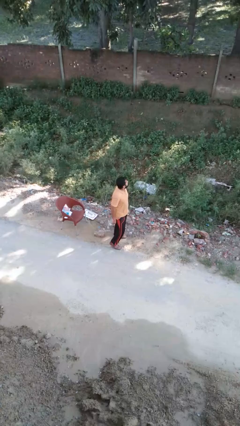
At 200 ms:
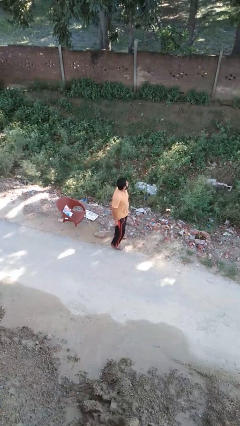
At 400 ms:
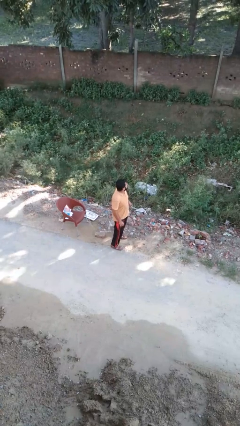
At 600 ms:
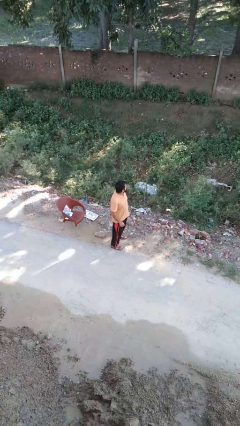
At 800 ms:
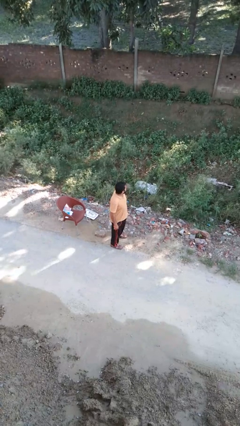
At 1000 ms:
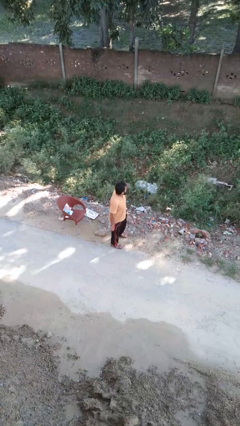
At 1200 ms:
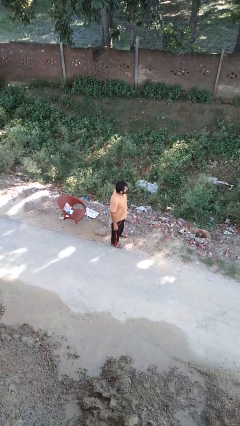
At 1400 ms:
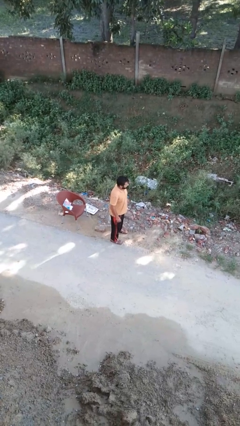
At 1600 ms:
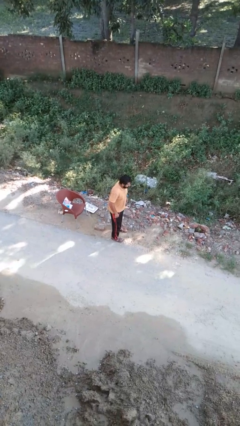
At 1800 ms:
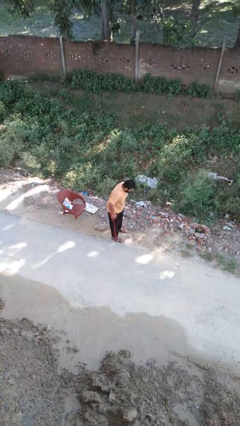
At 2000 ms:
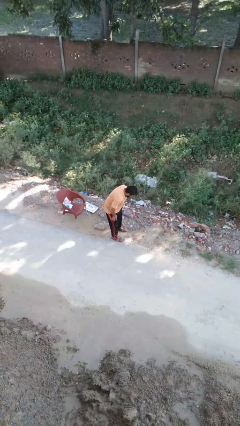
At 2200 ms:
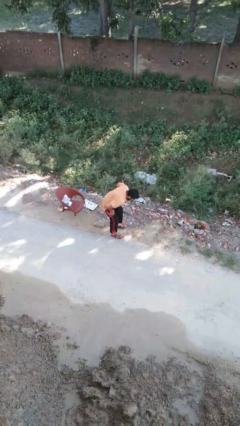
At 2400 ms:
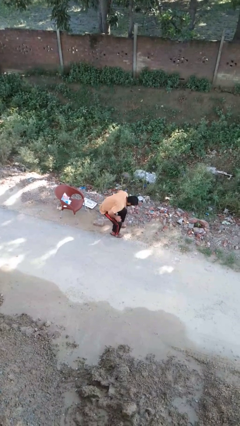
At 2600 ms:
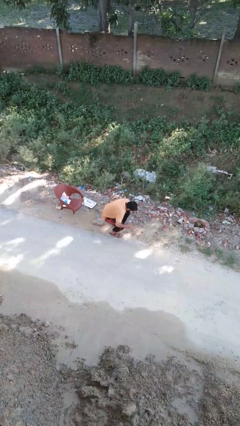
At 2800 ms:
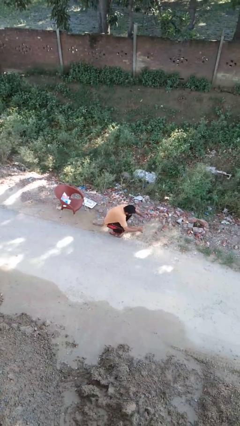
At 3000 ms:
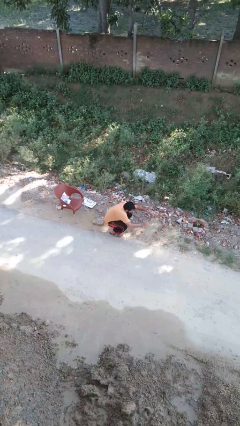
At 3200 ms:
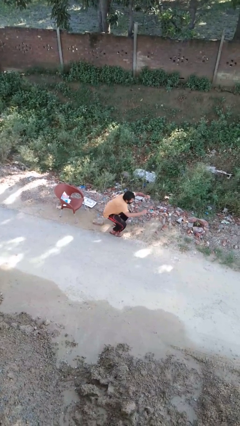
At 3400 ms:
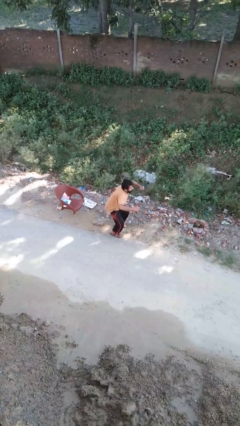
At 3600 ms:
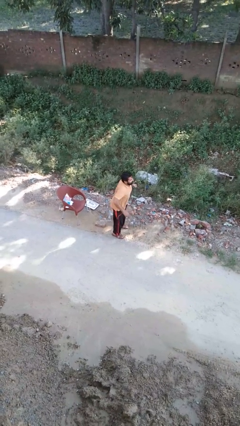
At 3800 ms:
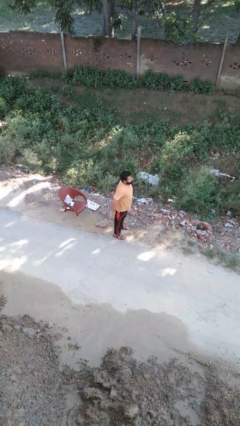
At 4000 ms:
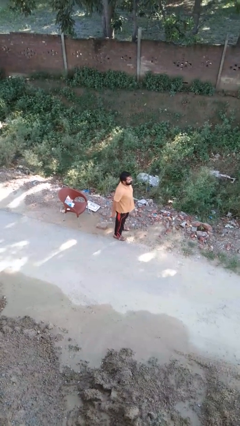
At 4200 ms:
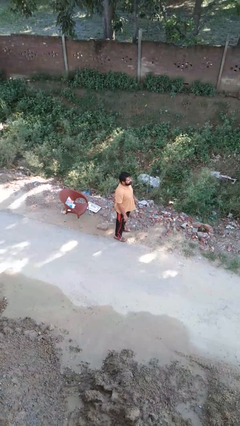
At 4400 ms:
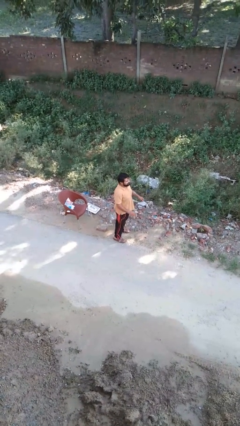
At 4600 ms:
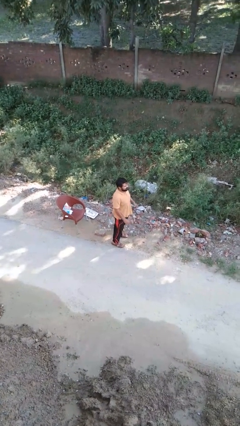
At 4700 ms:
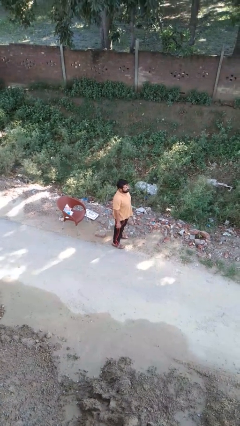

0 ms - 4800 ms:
person exercises with situp

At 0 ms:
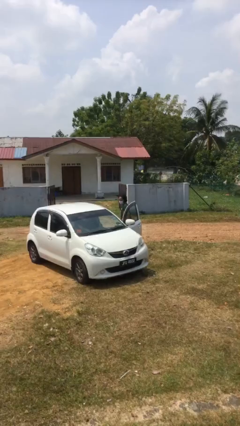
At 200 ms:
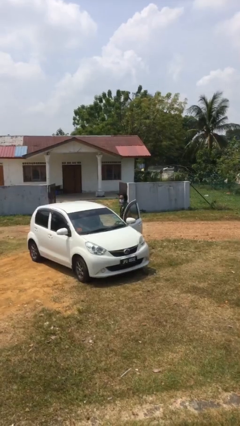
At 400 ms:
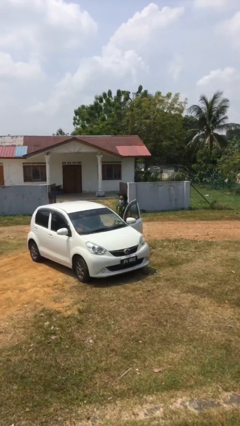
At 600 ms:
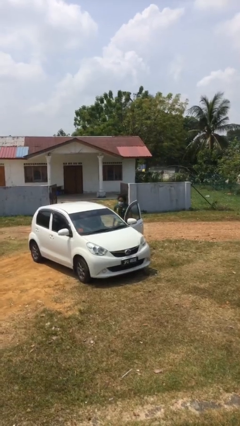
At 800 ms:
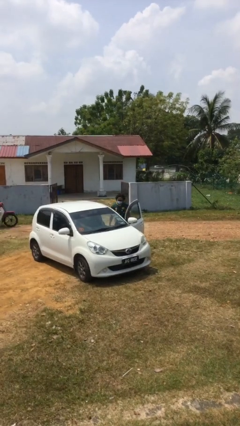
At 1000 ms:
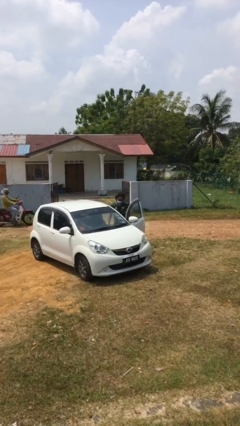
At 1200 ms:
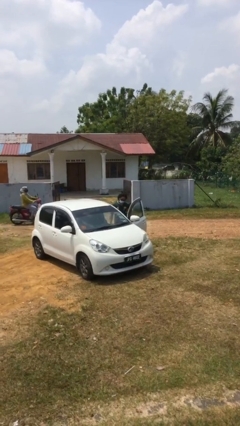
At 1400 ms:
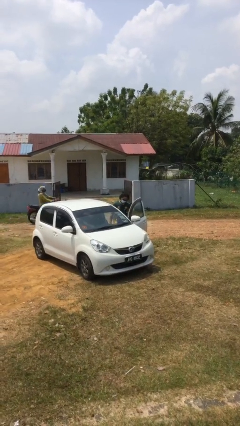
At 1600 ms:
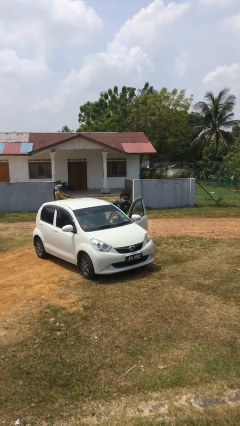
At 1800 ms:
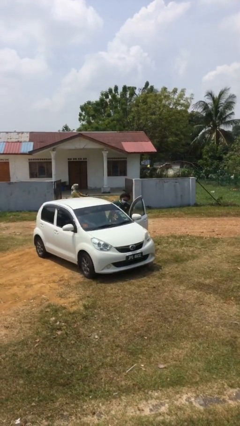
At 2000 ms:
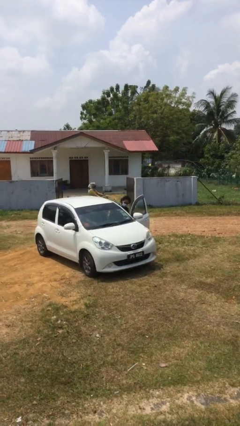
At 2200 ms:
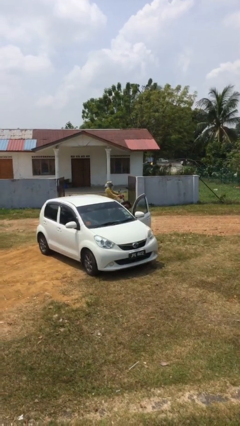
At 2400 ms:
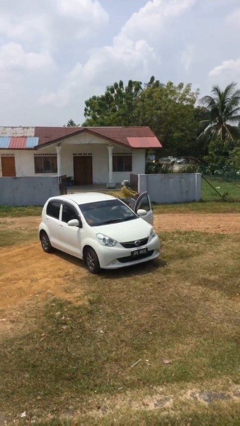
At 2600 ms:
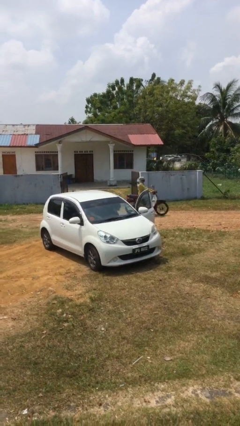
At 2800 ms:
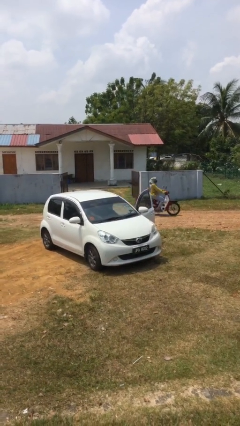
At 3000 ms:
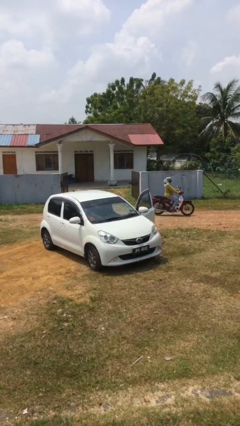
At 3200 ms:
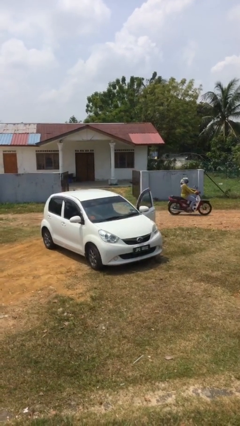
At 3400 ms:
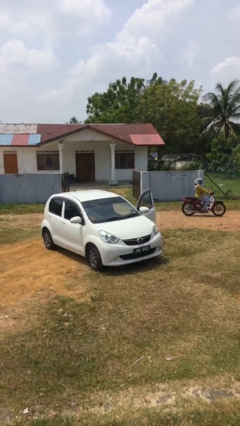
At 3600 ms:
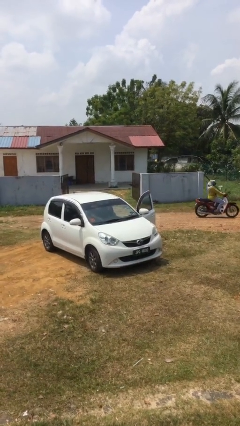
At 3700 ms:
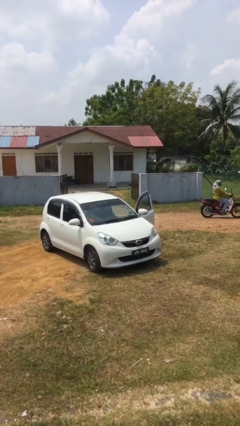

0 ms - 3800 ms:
person enters car

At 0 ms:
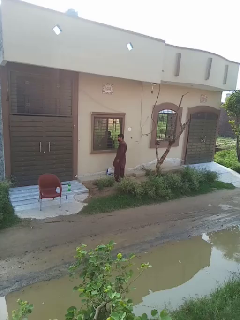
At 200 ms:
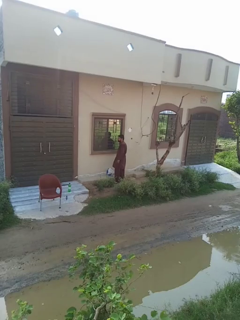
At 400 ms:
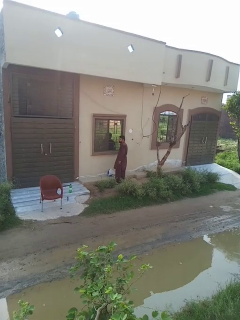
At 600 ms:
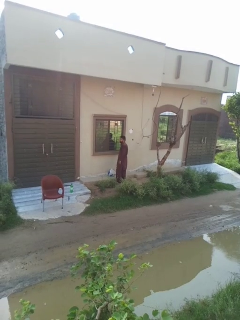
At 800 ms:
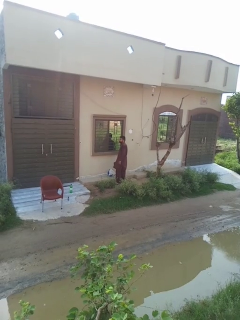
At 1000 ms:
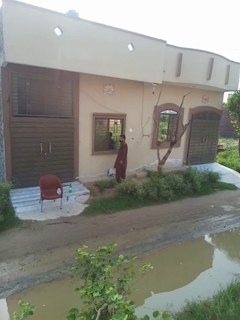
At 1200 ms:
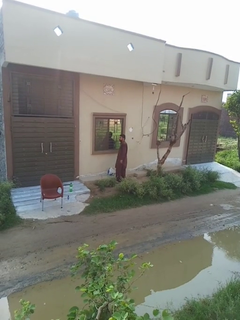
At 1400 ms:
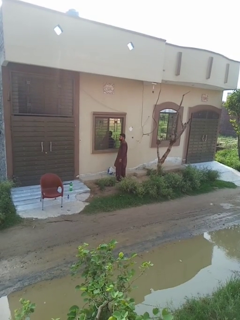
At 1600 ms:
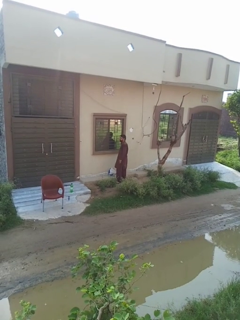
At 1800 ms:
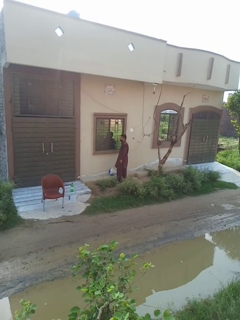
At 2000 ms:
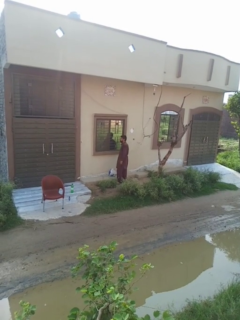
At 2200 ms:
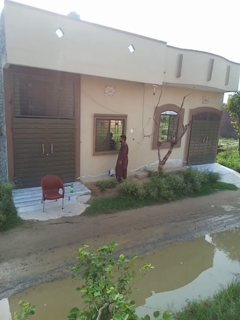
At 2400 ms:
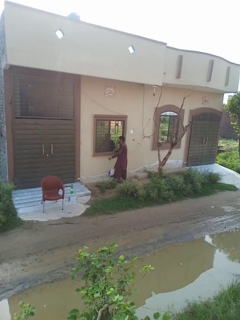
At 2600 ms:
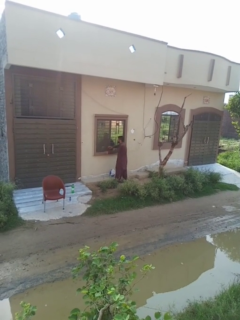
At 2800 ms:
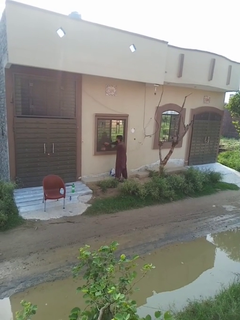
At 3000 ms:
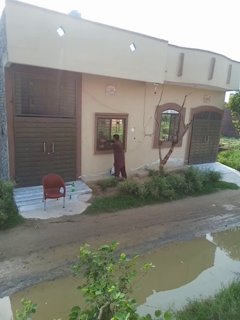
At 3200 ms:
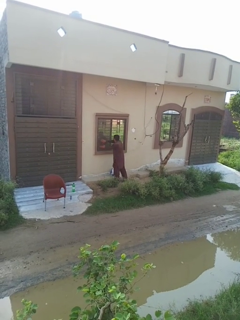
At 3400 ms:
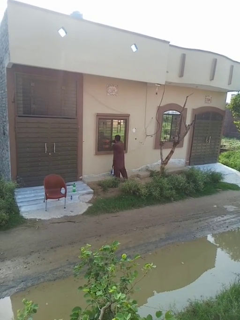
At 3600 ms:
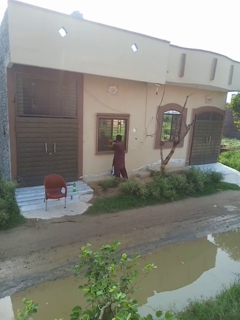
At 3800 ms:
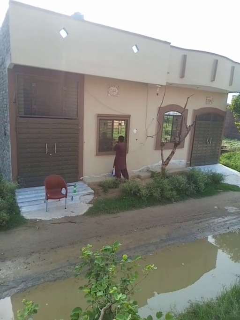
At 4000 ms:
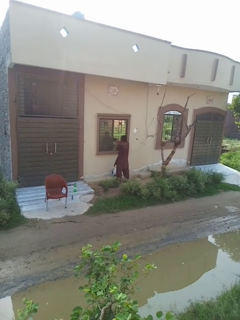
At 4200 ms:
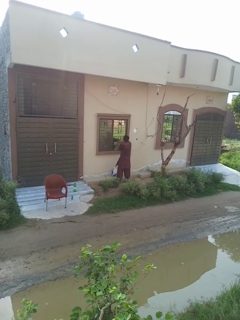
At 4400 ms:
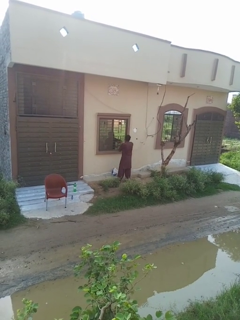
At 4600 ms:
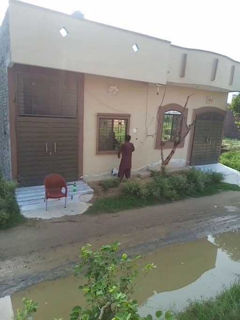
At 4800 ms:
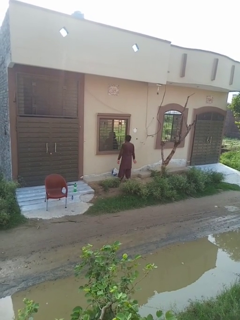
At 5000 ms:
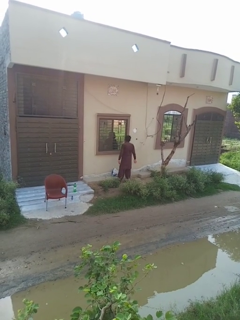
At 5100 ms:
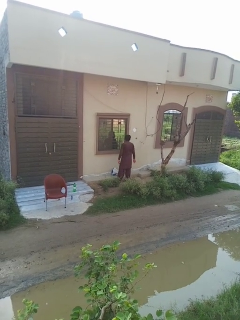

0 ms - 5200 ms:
person opens home window

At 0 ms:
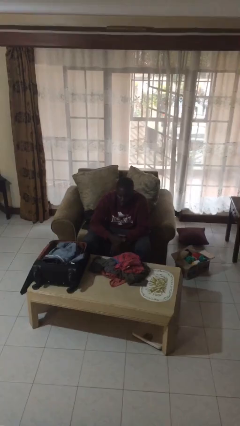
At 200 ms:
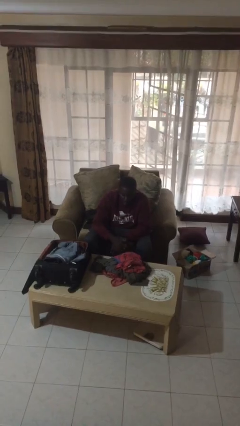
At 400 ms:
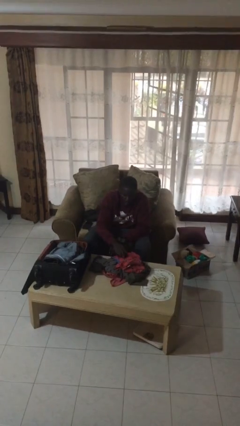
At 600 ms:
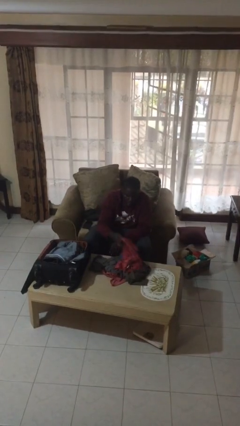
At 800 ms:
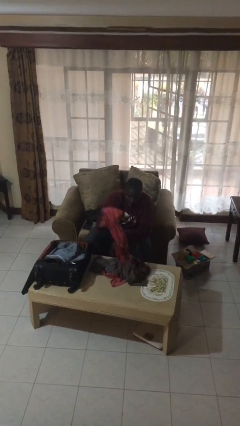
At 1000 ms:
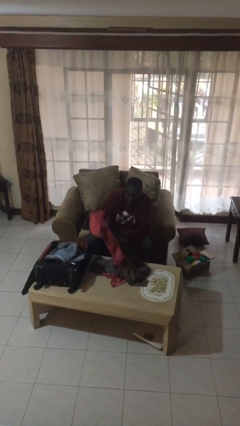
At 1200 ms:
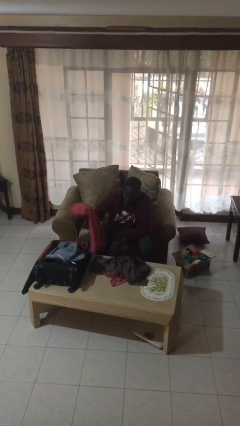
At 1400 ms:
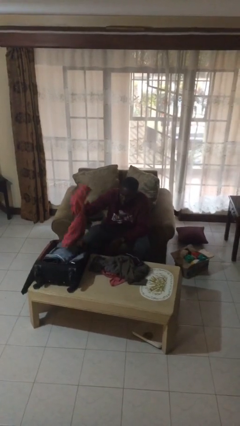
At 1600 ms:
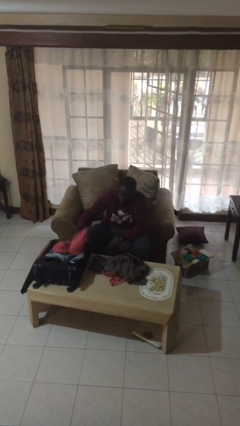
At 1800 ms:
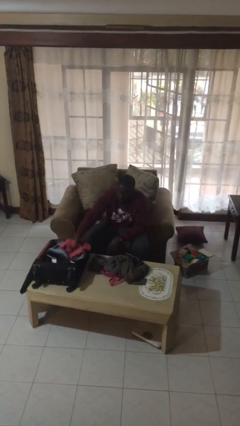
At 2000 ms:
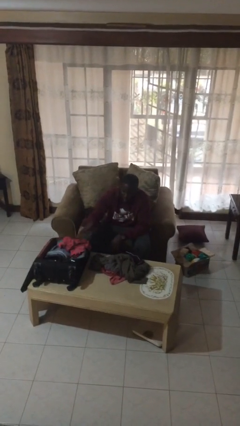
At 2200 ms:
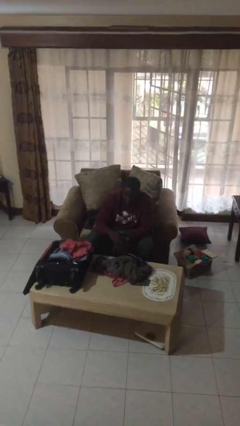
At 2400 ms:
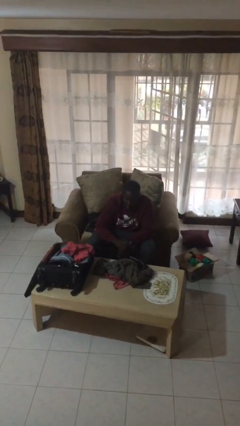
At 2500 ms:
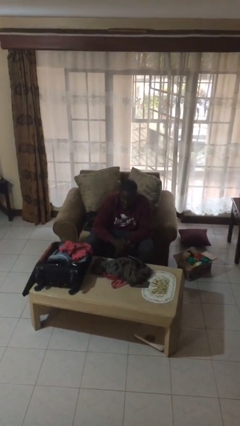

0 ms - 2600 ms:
person loads clothes into suitcase

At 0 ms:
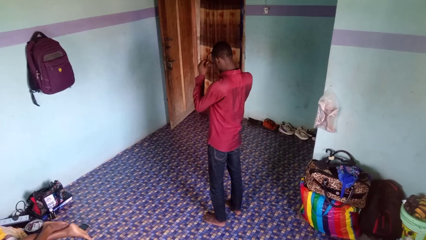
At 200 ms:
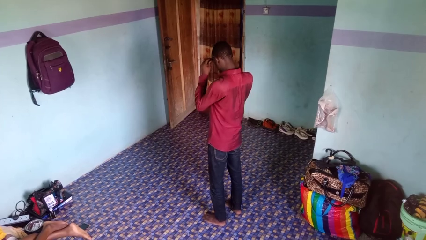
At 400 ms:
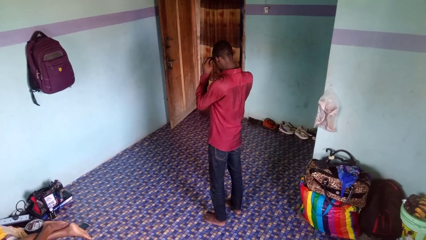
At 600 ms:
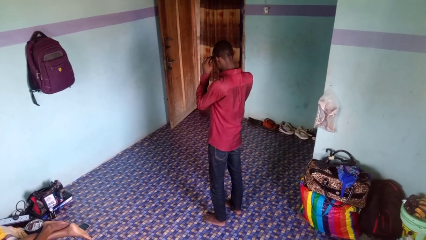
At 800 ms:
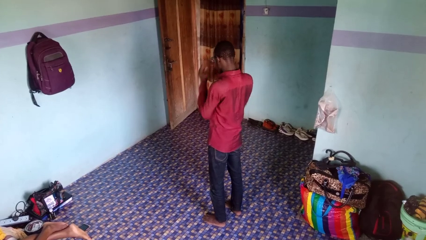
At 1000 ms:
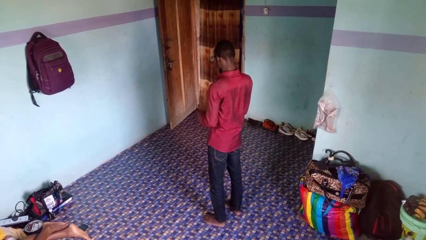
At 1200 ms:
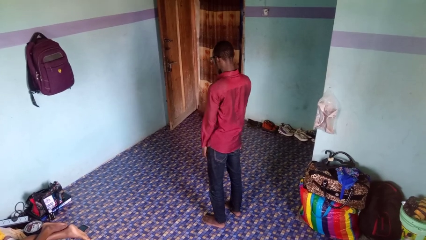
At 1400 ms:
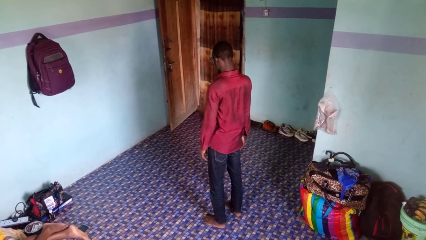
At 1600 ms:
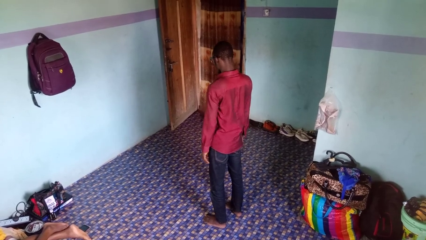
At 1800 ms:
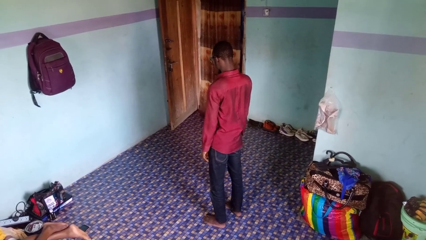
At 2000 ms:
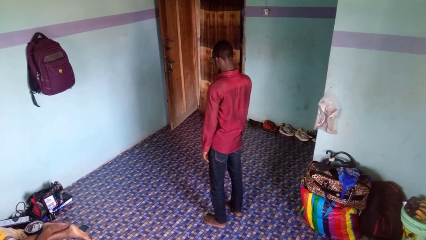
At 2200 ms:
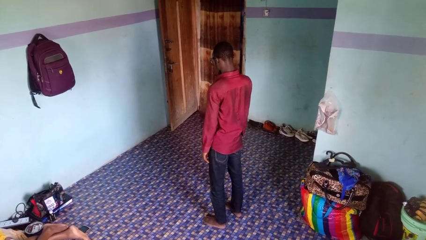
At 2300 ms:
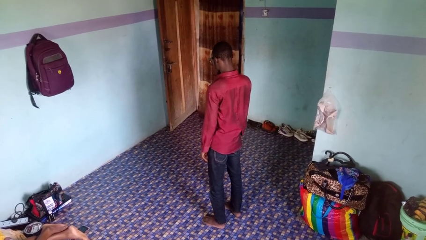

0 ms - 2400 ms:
person puts on glasses

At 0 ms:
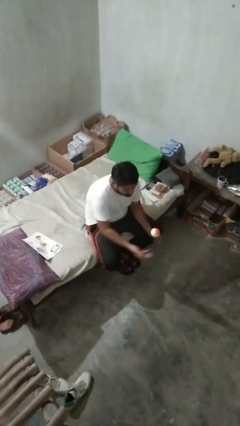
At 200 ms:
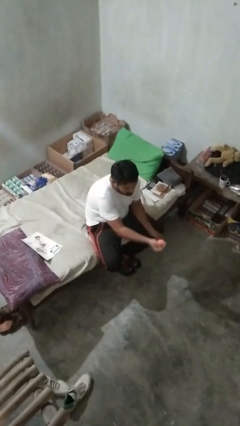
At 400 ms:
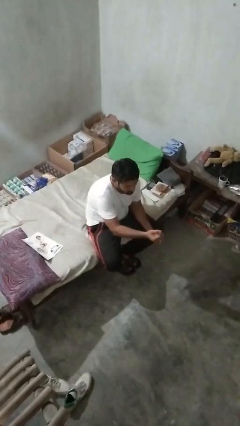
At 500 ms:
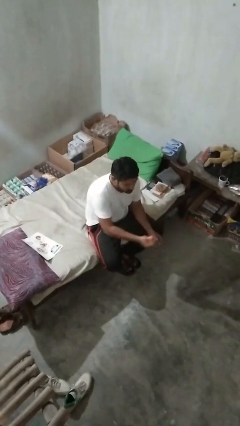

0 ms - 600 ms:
person bounces ball on floor
